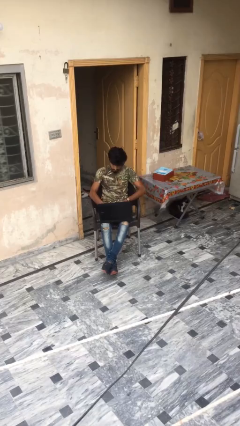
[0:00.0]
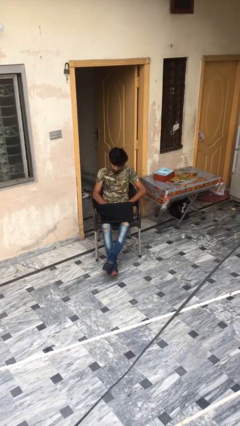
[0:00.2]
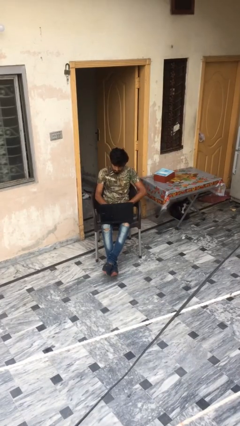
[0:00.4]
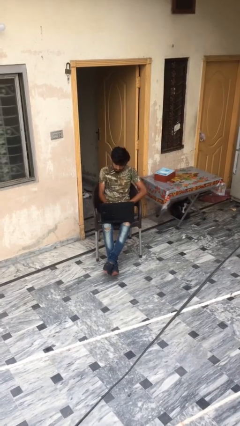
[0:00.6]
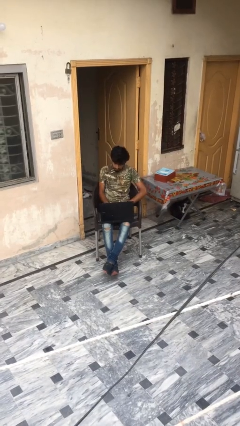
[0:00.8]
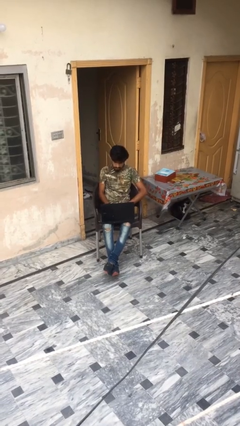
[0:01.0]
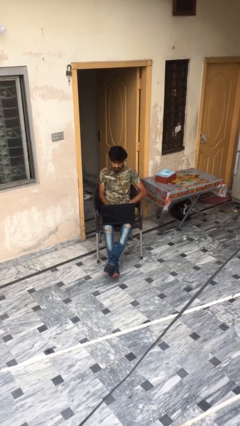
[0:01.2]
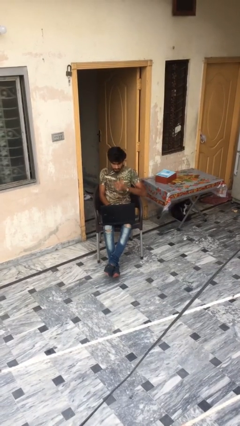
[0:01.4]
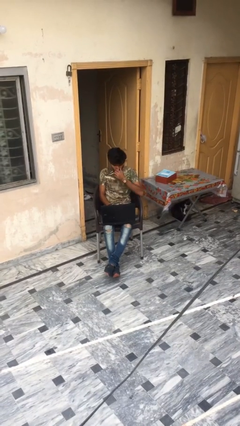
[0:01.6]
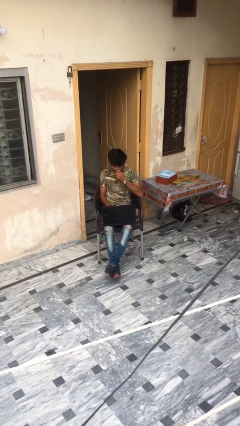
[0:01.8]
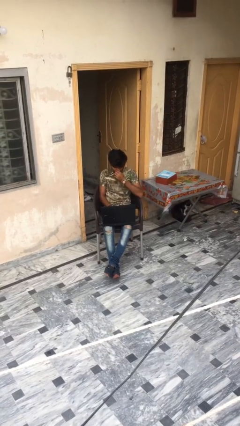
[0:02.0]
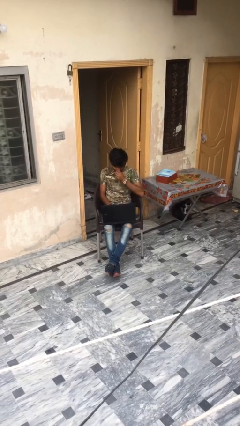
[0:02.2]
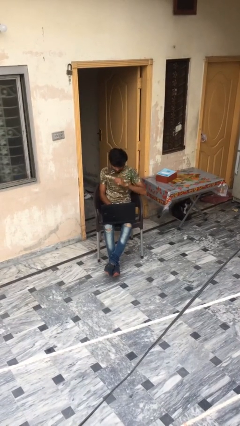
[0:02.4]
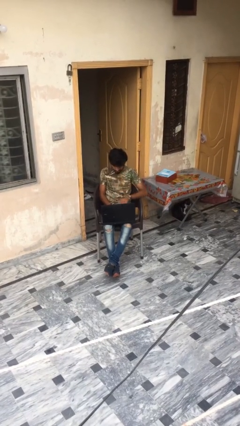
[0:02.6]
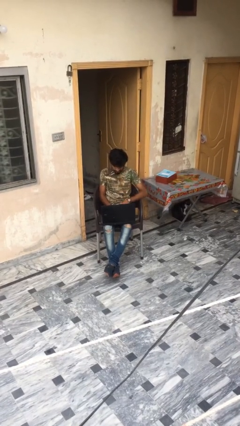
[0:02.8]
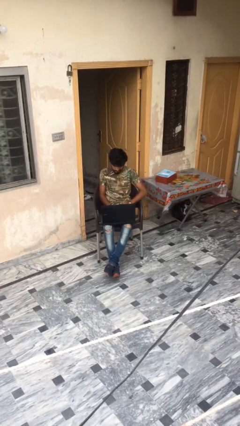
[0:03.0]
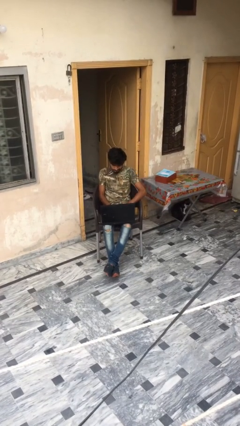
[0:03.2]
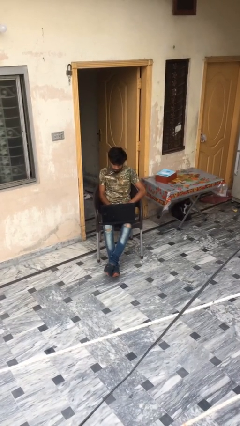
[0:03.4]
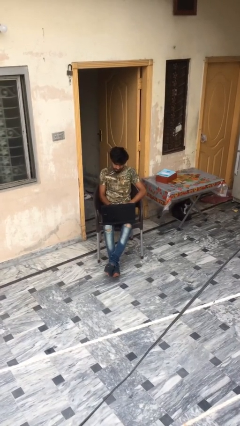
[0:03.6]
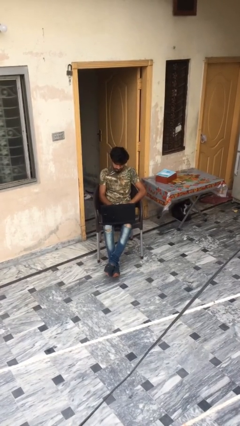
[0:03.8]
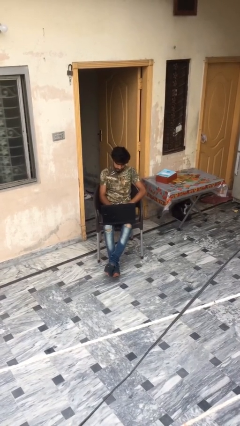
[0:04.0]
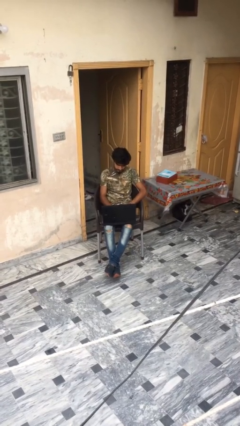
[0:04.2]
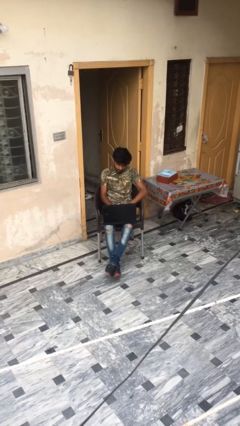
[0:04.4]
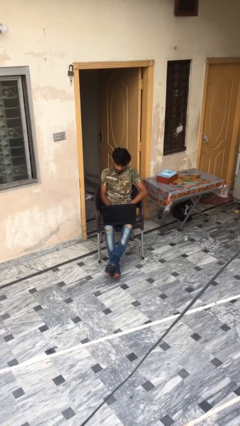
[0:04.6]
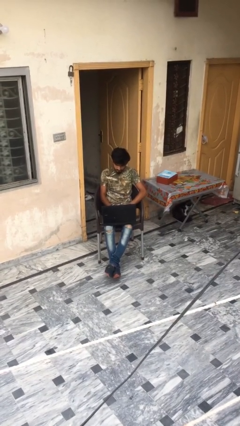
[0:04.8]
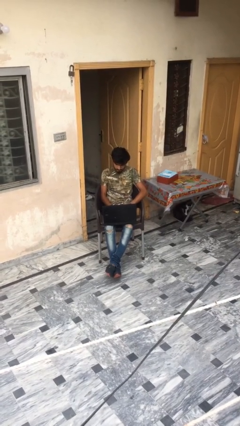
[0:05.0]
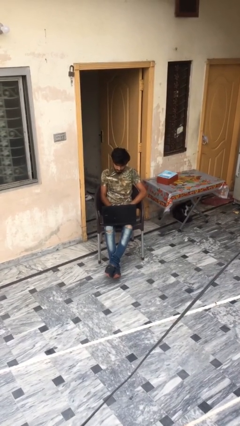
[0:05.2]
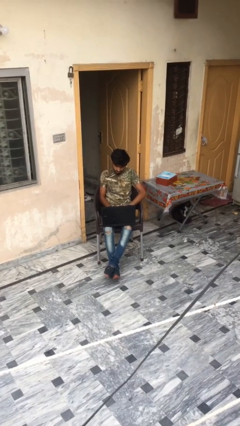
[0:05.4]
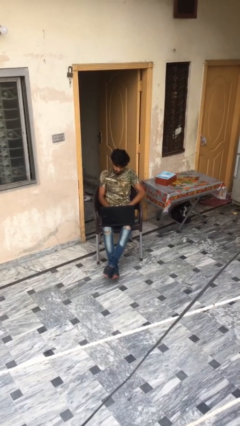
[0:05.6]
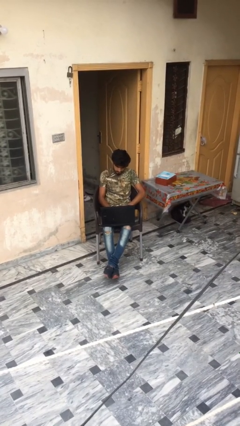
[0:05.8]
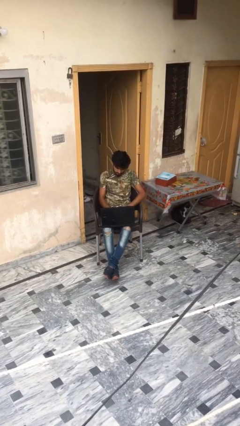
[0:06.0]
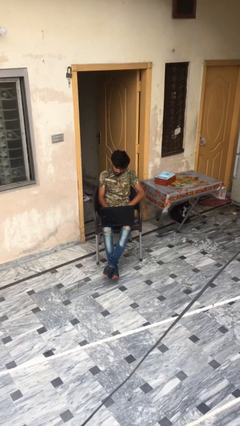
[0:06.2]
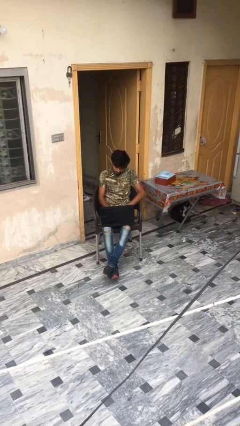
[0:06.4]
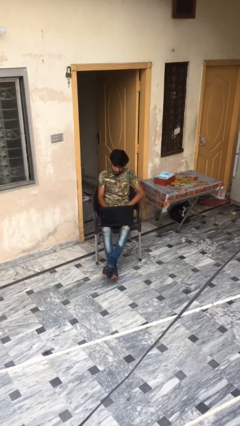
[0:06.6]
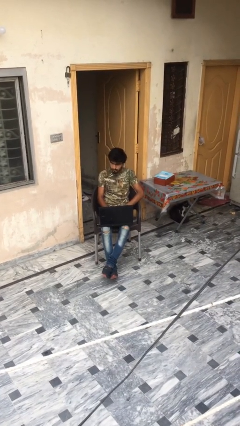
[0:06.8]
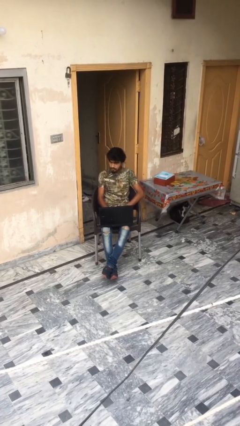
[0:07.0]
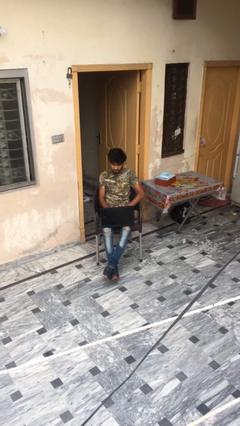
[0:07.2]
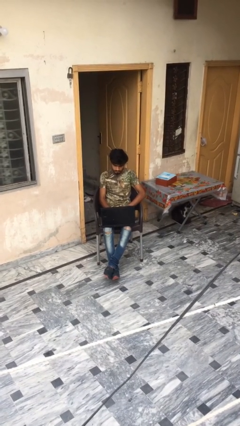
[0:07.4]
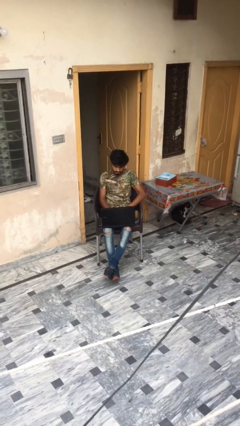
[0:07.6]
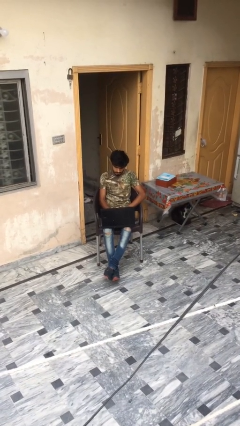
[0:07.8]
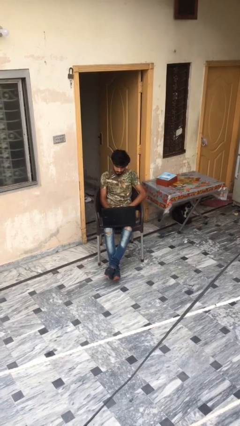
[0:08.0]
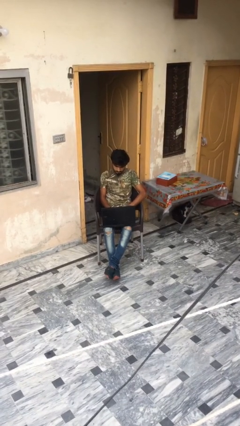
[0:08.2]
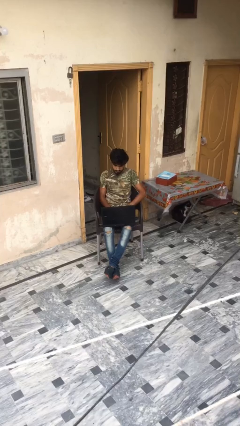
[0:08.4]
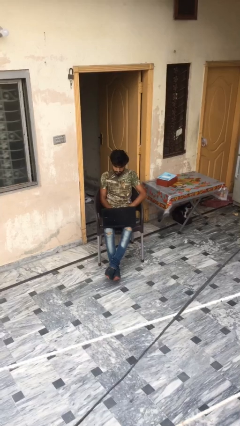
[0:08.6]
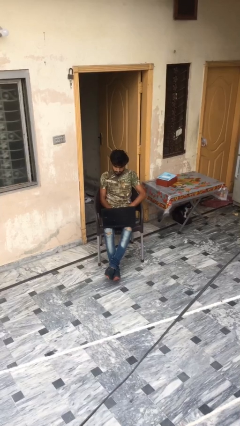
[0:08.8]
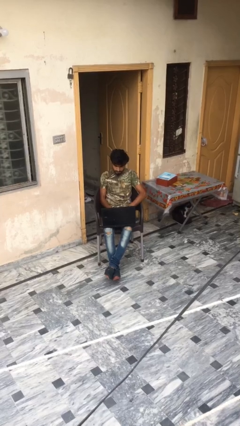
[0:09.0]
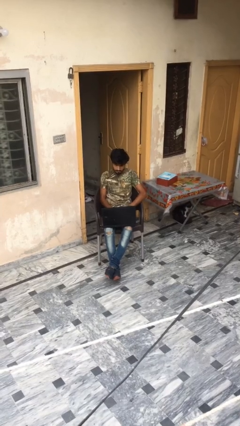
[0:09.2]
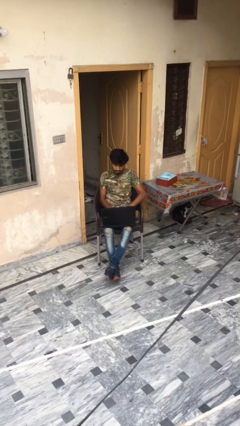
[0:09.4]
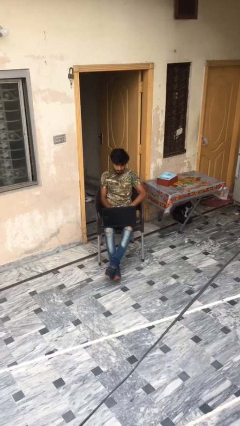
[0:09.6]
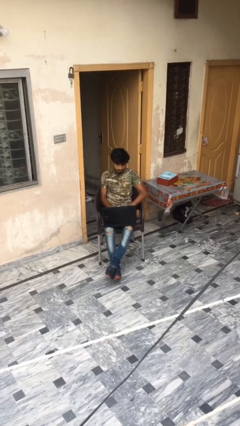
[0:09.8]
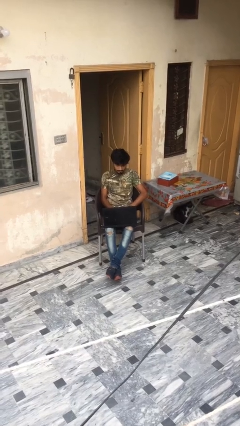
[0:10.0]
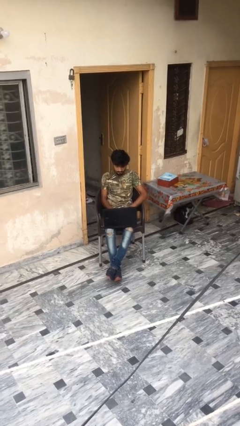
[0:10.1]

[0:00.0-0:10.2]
person interacts with laptop

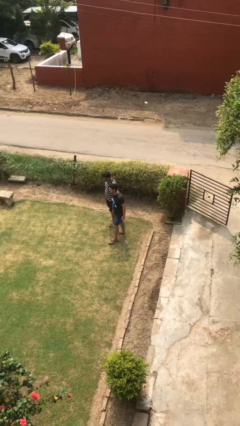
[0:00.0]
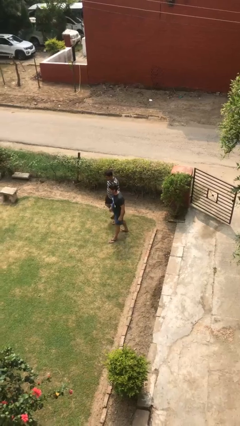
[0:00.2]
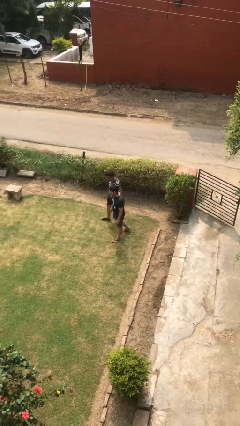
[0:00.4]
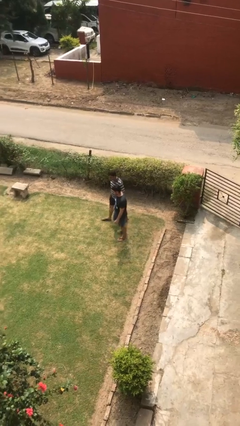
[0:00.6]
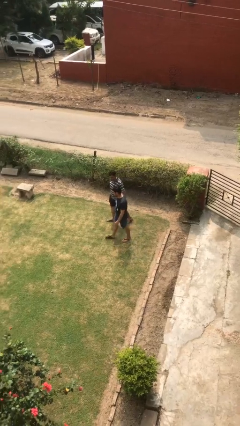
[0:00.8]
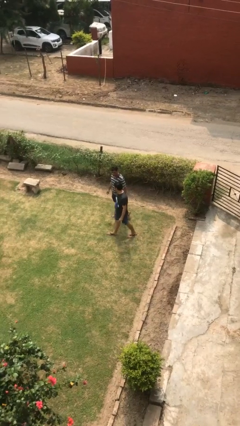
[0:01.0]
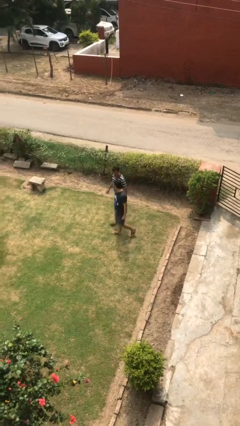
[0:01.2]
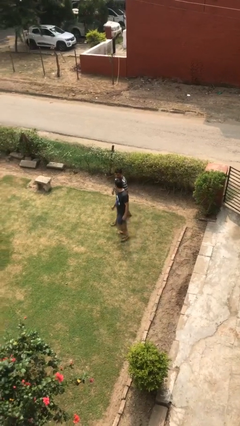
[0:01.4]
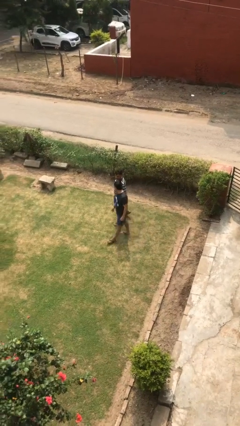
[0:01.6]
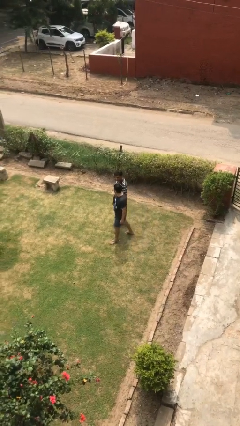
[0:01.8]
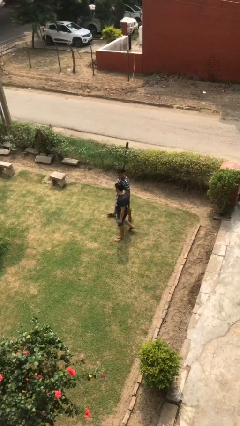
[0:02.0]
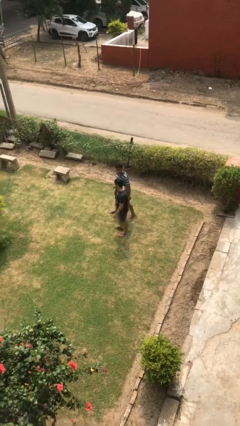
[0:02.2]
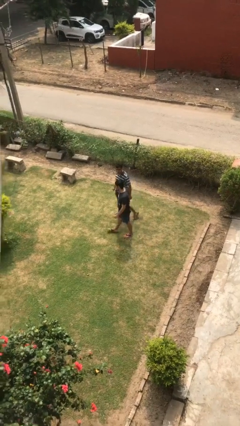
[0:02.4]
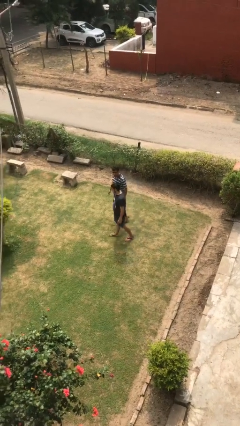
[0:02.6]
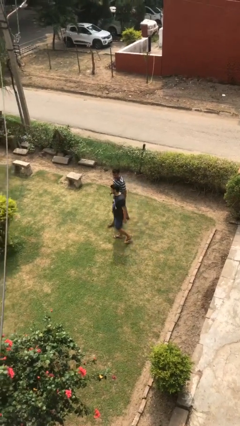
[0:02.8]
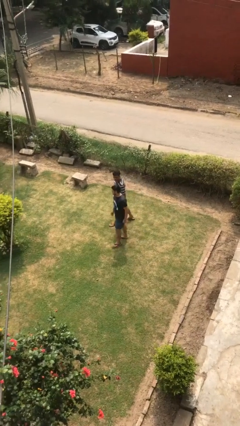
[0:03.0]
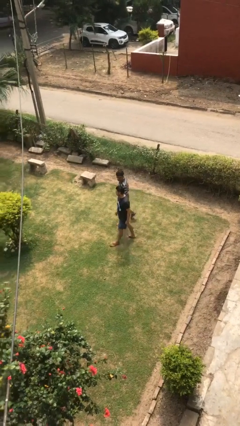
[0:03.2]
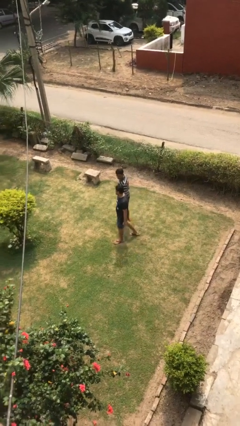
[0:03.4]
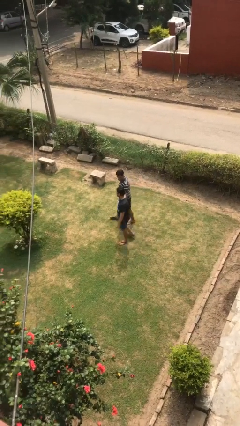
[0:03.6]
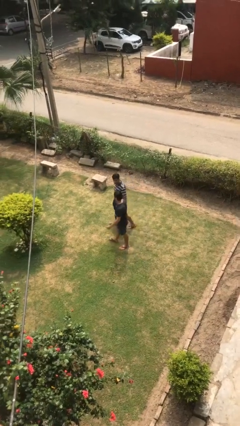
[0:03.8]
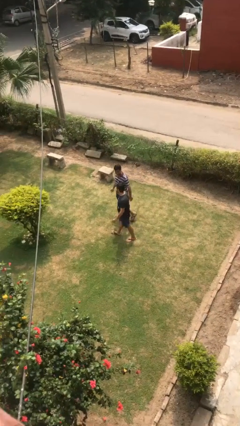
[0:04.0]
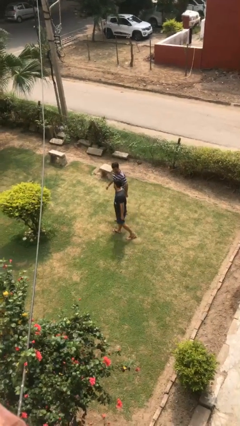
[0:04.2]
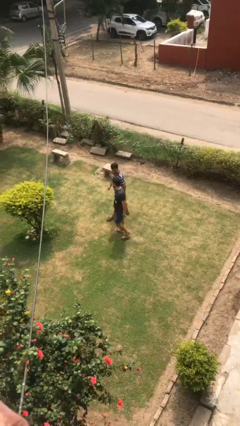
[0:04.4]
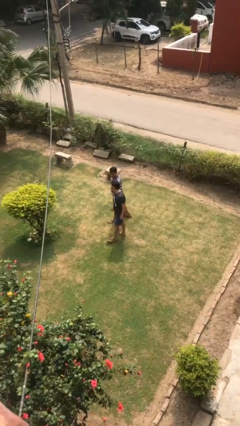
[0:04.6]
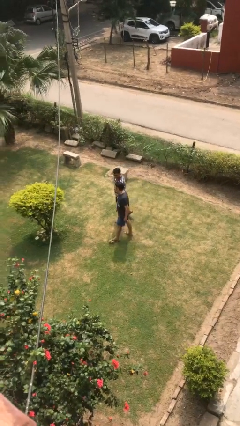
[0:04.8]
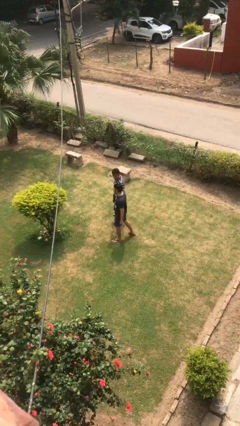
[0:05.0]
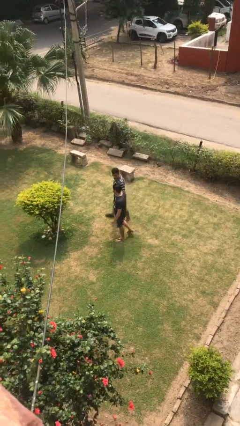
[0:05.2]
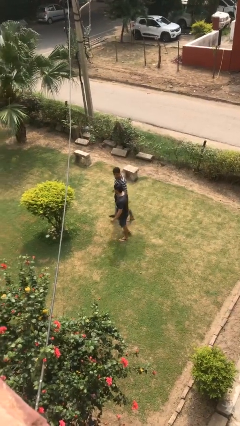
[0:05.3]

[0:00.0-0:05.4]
person talks to person

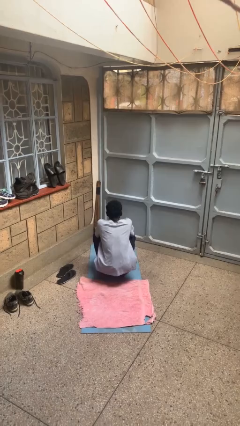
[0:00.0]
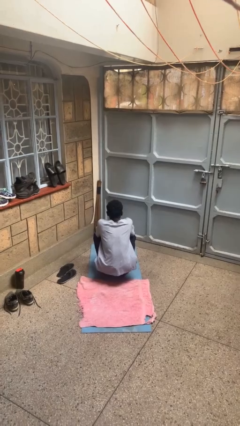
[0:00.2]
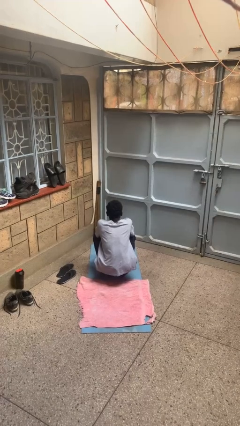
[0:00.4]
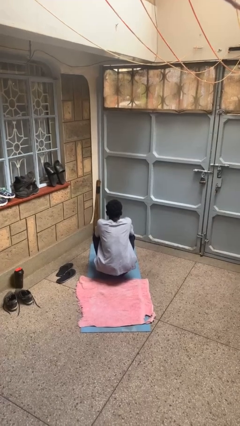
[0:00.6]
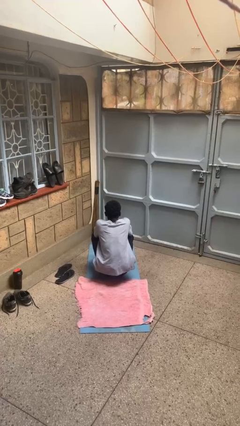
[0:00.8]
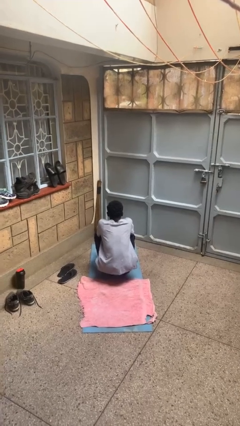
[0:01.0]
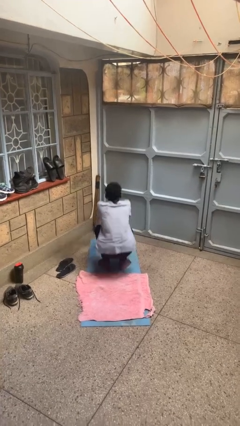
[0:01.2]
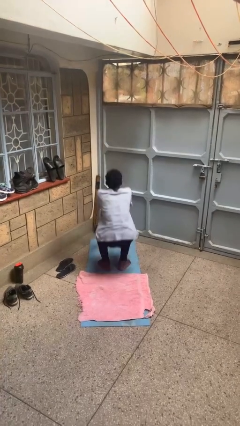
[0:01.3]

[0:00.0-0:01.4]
person squats

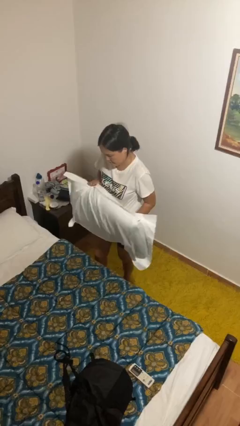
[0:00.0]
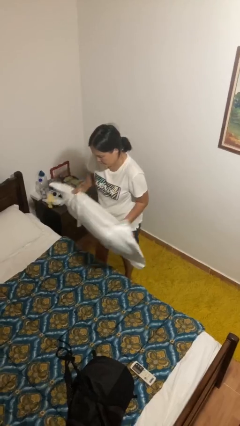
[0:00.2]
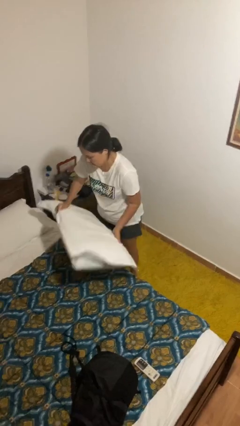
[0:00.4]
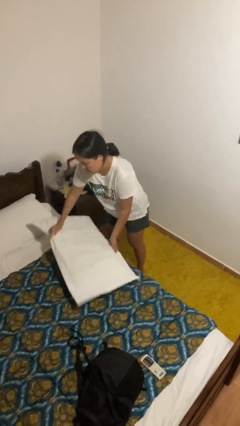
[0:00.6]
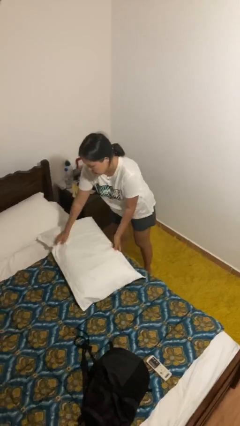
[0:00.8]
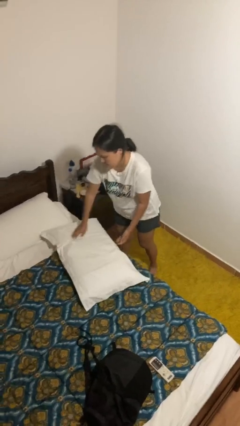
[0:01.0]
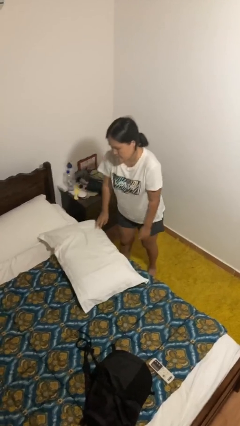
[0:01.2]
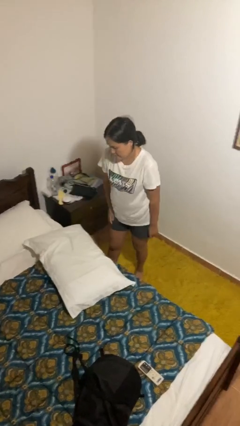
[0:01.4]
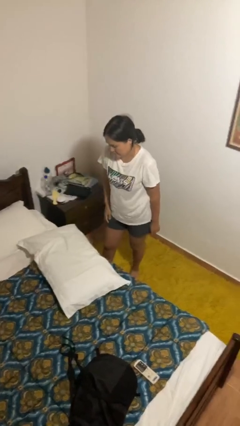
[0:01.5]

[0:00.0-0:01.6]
person puts down object on bed
